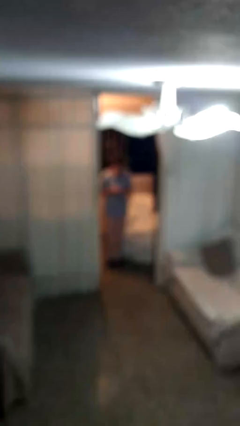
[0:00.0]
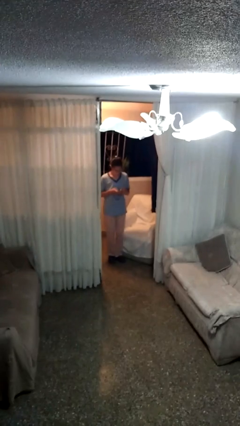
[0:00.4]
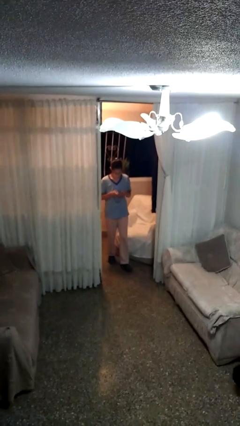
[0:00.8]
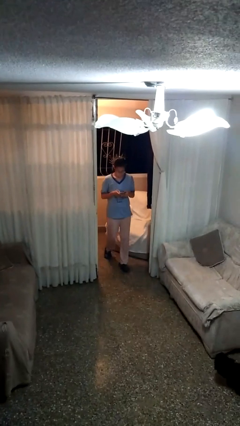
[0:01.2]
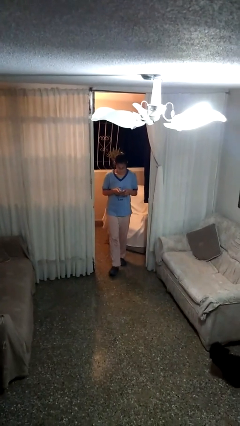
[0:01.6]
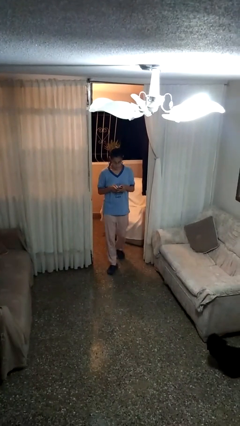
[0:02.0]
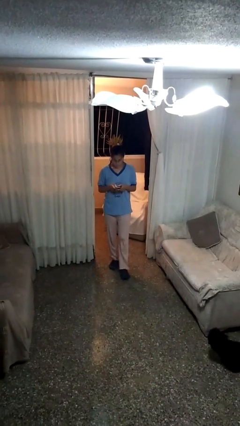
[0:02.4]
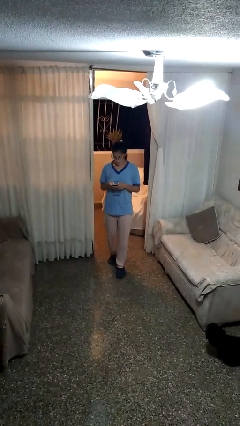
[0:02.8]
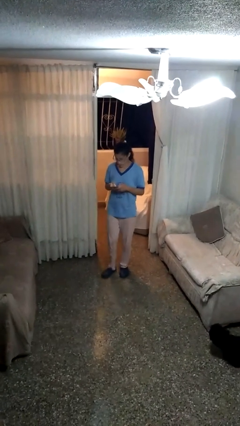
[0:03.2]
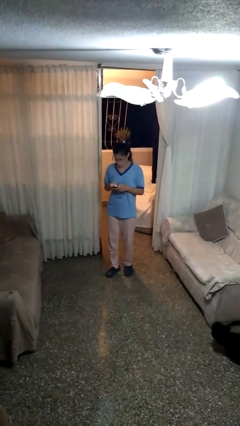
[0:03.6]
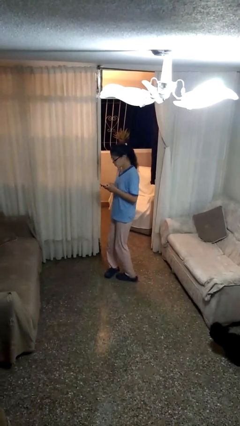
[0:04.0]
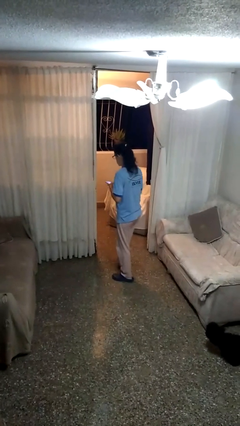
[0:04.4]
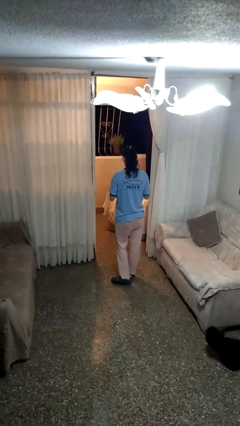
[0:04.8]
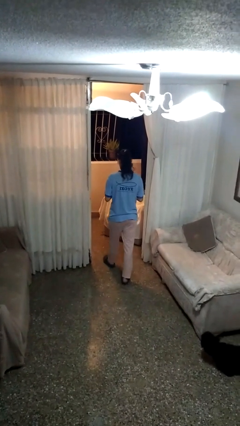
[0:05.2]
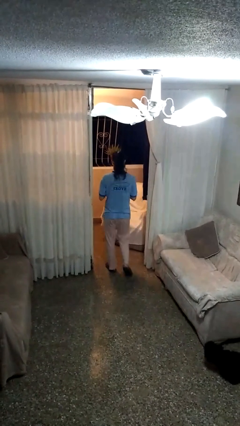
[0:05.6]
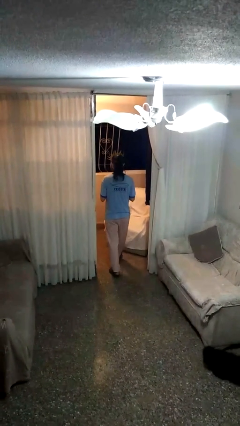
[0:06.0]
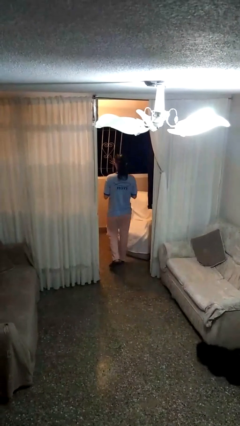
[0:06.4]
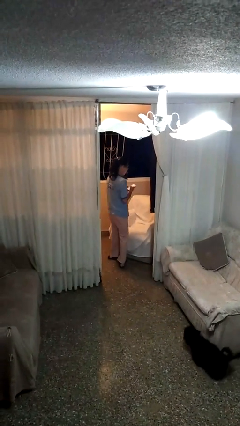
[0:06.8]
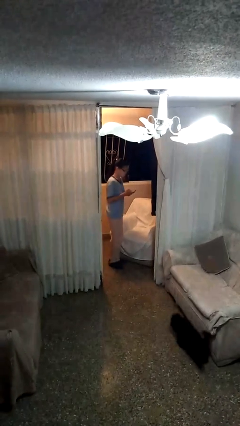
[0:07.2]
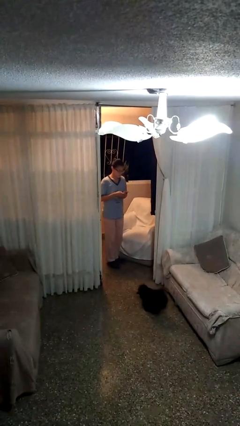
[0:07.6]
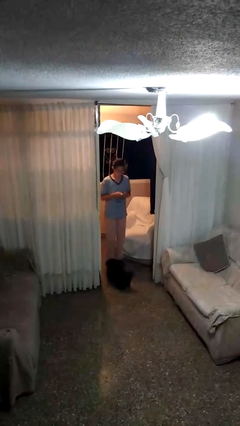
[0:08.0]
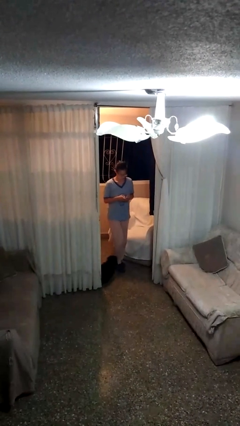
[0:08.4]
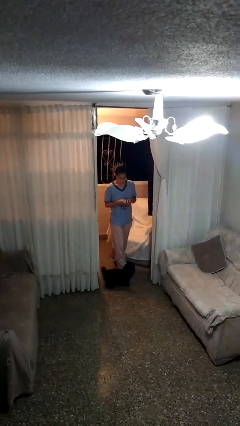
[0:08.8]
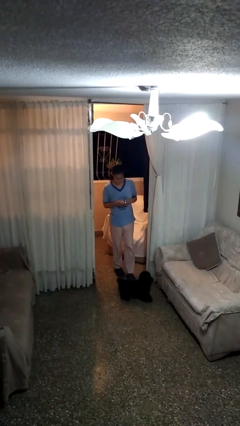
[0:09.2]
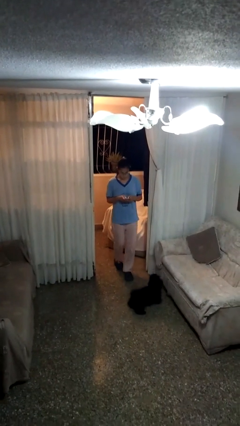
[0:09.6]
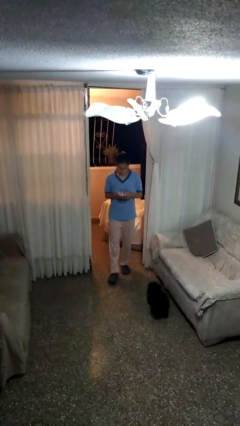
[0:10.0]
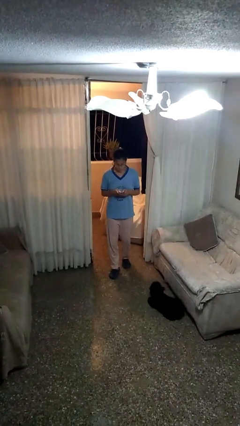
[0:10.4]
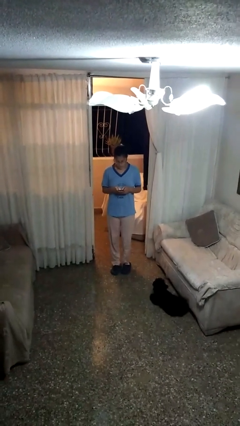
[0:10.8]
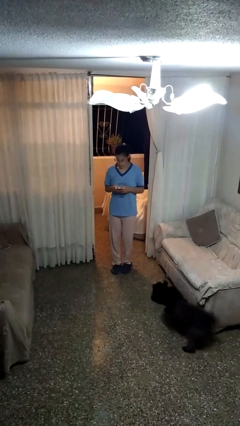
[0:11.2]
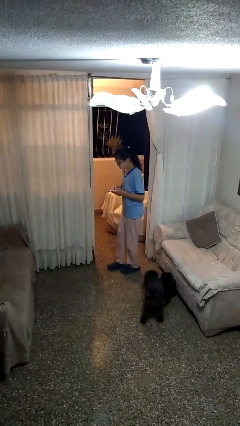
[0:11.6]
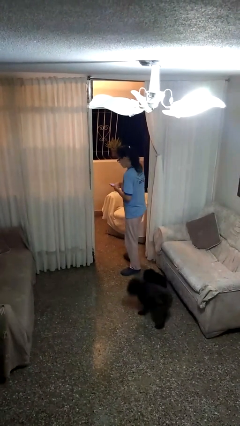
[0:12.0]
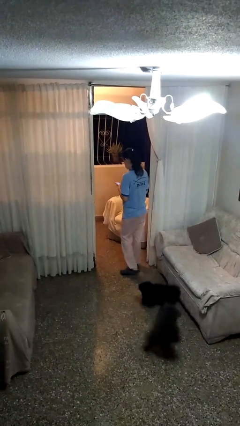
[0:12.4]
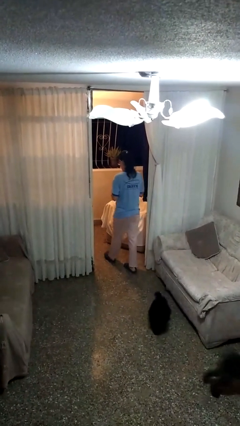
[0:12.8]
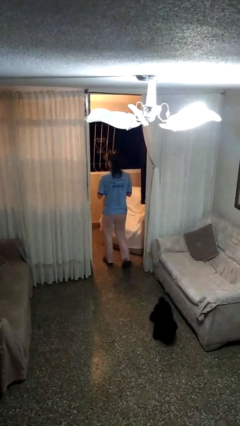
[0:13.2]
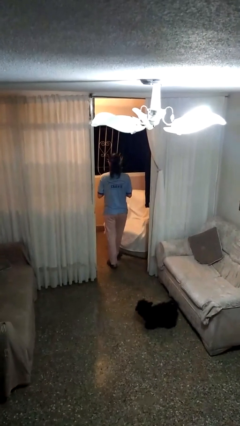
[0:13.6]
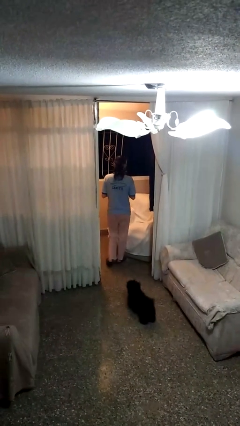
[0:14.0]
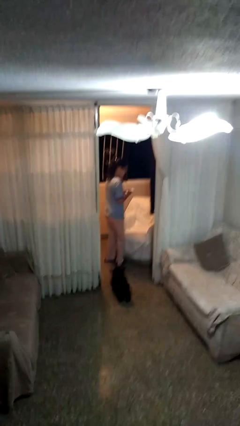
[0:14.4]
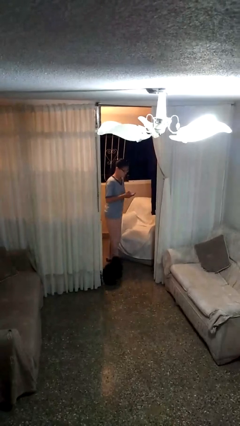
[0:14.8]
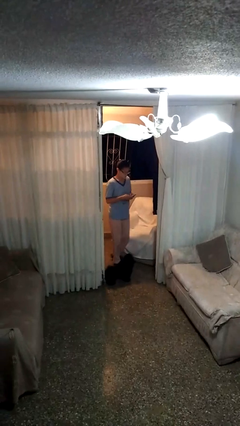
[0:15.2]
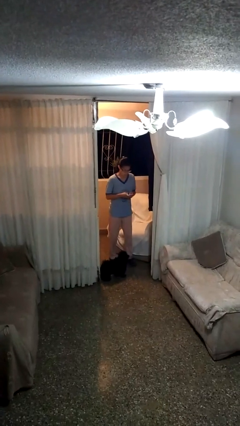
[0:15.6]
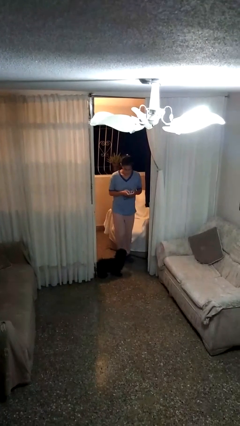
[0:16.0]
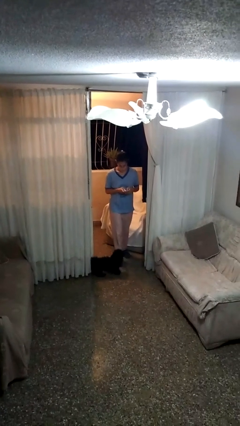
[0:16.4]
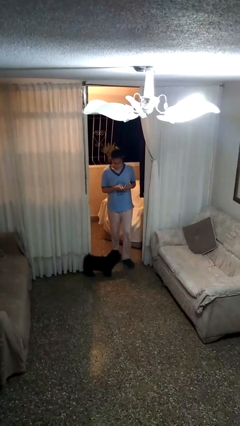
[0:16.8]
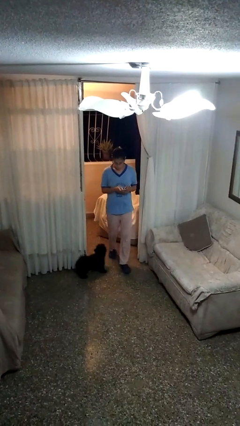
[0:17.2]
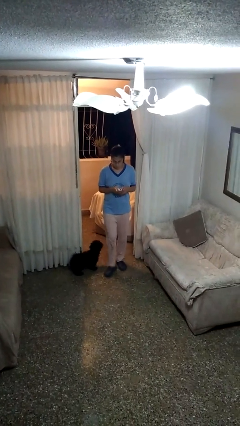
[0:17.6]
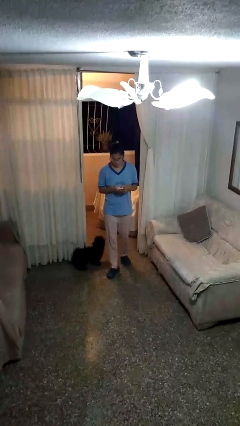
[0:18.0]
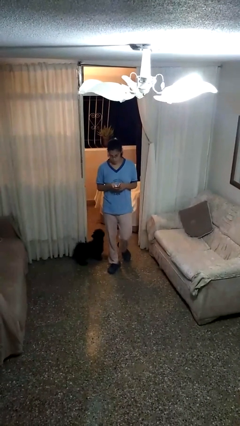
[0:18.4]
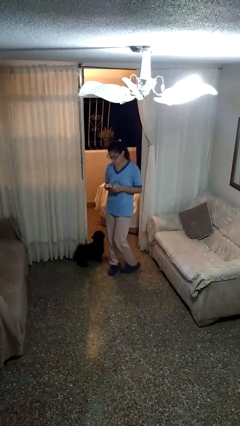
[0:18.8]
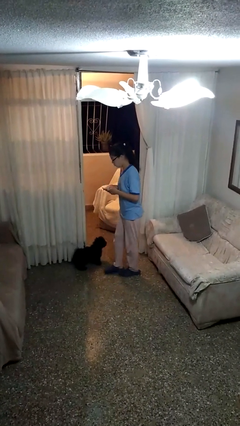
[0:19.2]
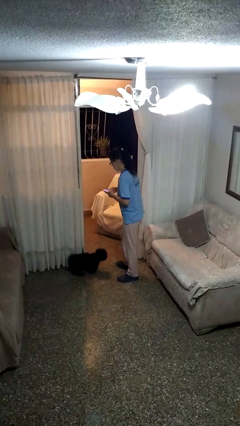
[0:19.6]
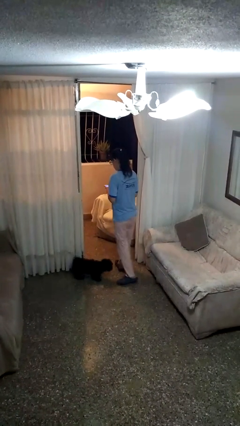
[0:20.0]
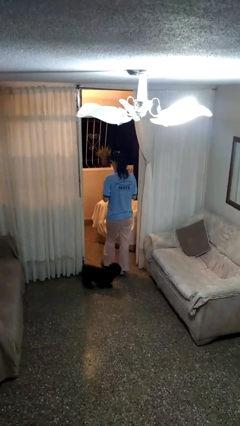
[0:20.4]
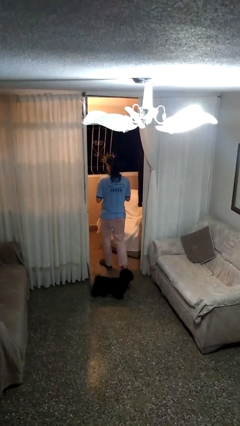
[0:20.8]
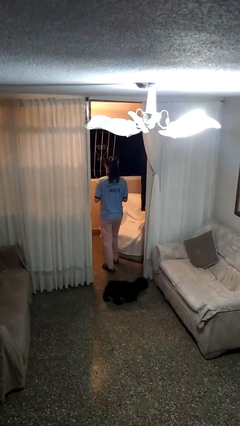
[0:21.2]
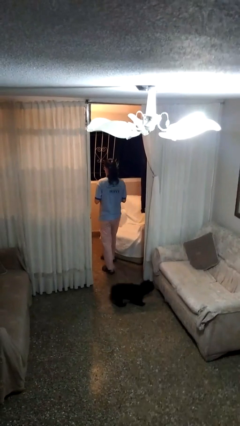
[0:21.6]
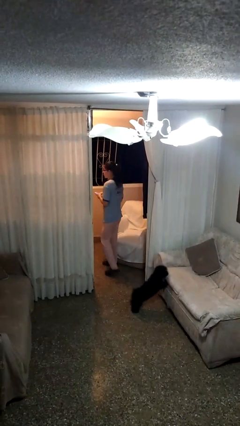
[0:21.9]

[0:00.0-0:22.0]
person texts on phone

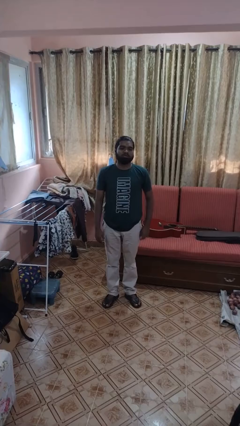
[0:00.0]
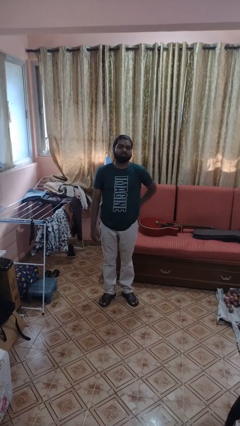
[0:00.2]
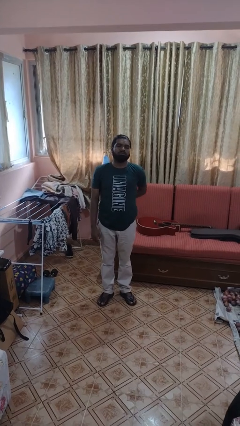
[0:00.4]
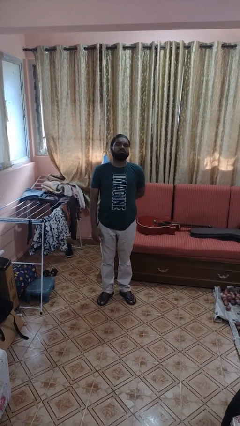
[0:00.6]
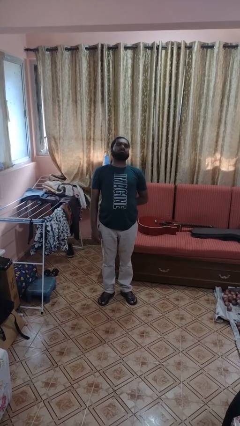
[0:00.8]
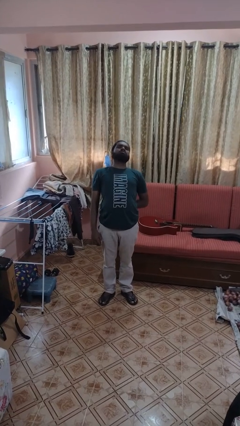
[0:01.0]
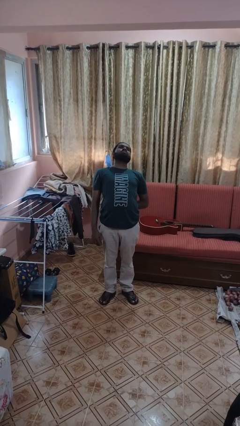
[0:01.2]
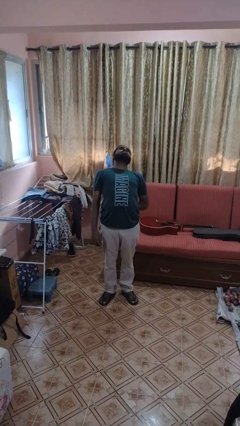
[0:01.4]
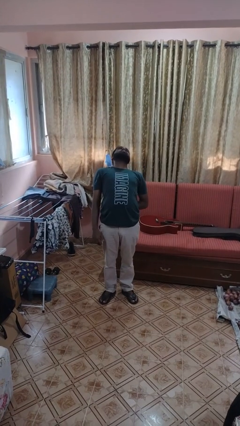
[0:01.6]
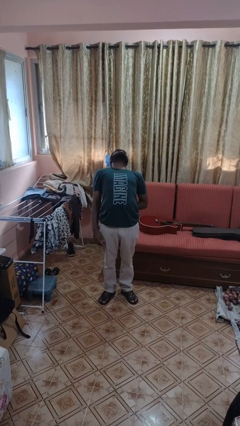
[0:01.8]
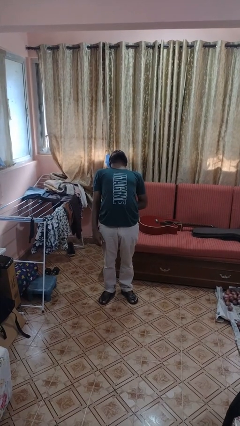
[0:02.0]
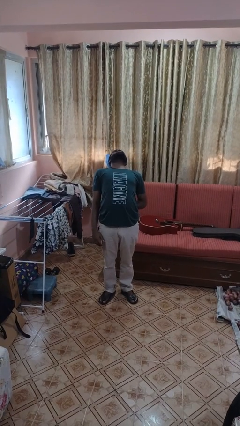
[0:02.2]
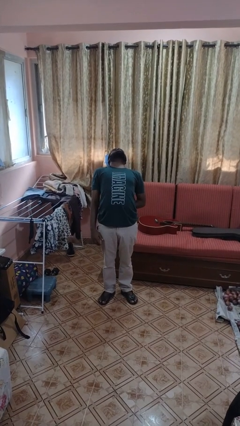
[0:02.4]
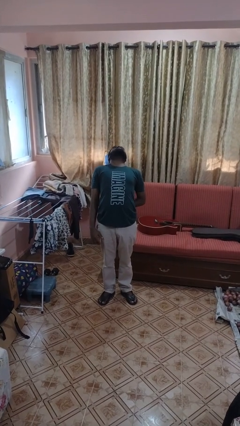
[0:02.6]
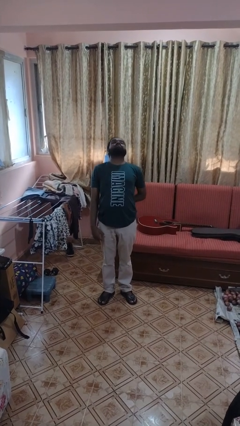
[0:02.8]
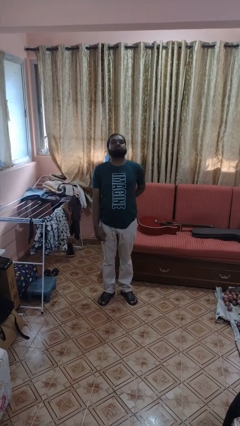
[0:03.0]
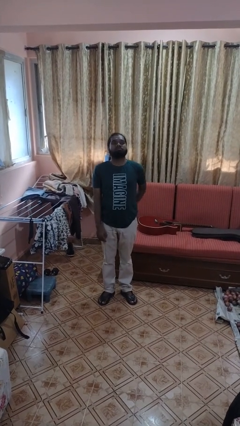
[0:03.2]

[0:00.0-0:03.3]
person stretches back

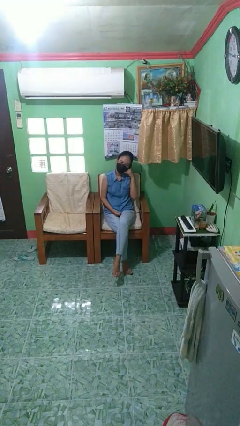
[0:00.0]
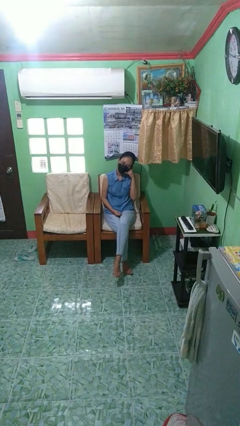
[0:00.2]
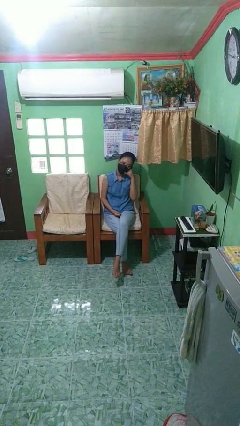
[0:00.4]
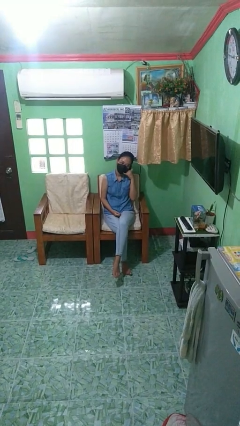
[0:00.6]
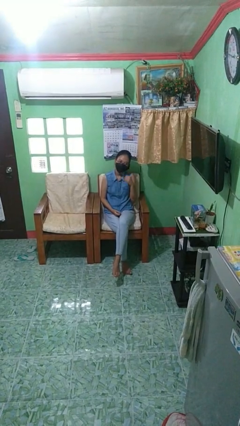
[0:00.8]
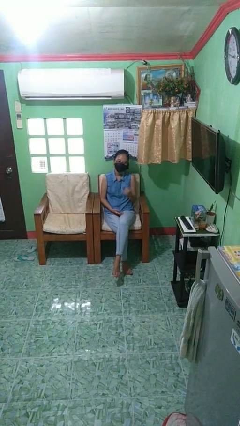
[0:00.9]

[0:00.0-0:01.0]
person gestures call me

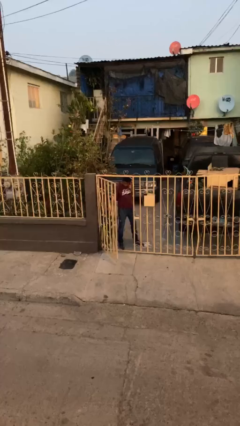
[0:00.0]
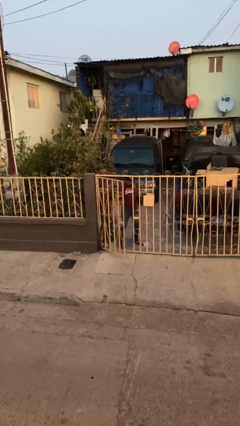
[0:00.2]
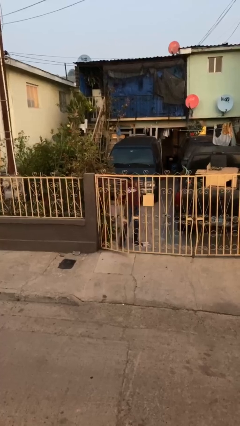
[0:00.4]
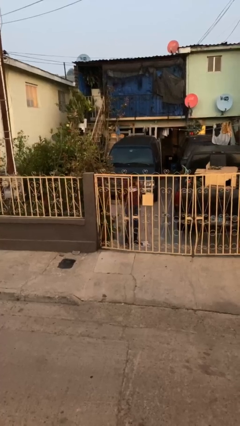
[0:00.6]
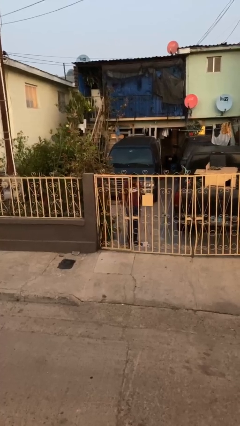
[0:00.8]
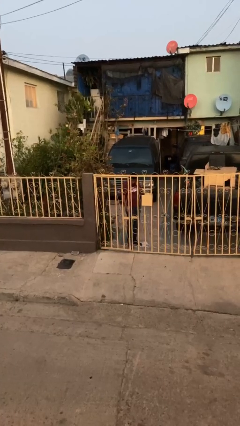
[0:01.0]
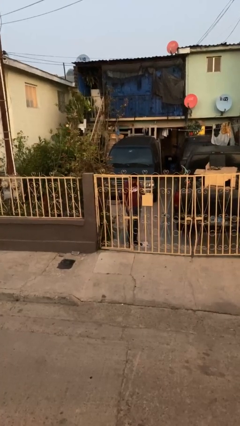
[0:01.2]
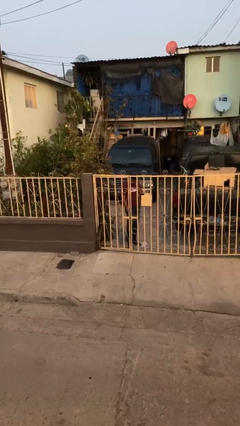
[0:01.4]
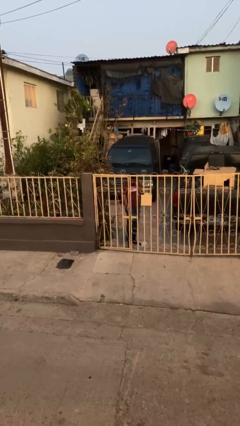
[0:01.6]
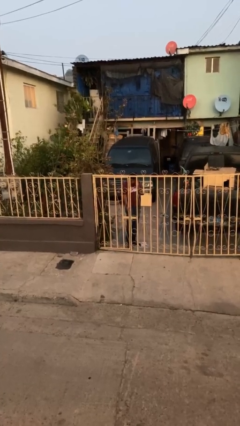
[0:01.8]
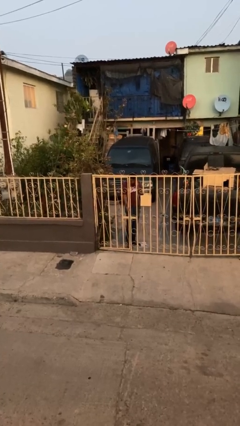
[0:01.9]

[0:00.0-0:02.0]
person closes facility door

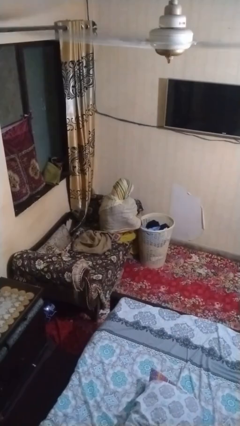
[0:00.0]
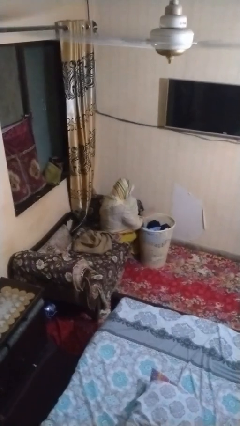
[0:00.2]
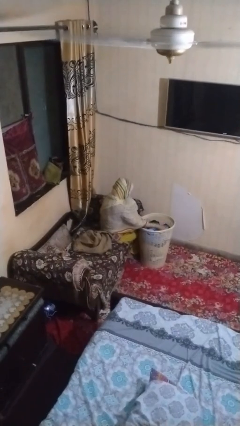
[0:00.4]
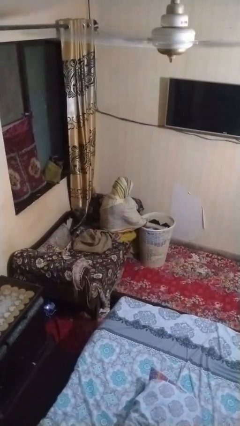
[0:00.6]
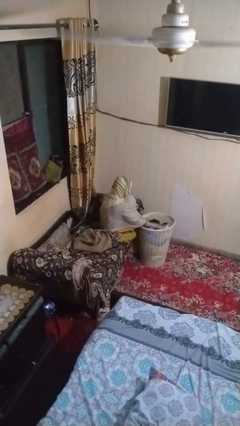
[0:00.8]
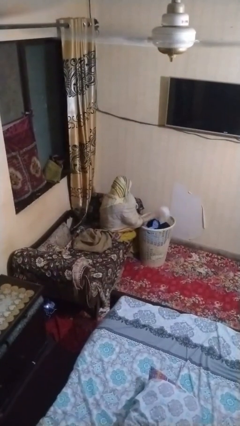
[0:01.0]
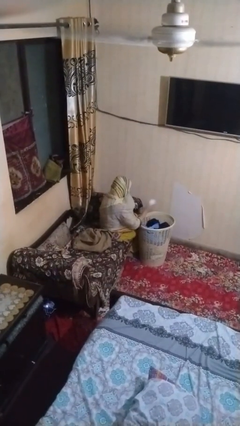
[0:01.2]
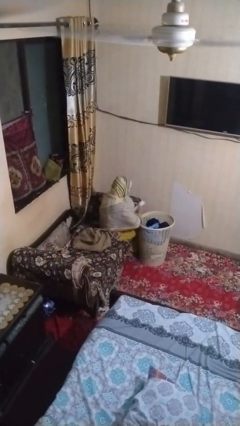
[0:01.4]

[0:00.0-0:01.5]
person takes object from basket
